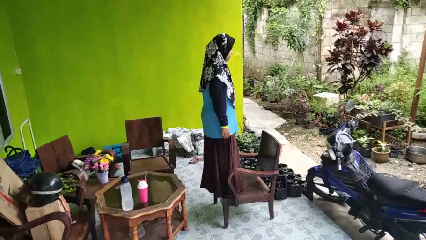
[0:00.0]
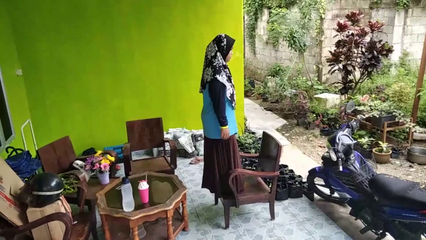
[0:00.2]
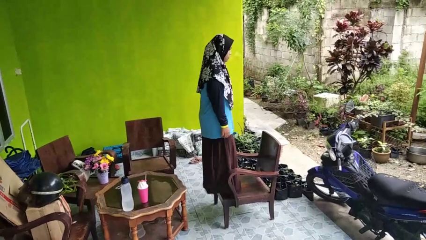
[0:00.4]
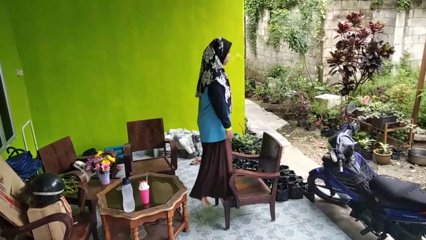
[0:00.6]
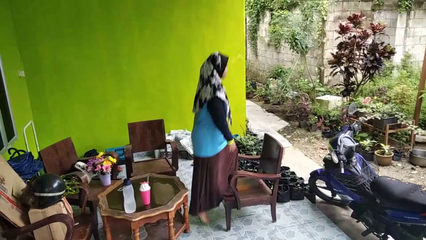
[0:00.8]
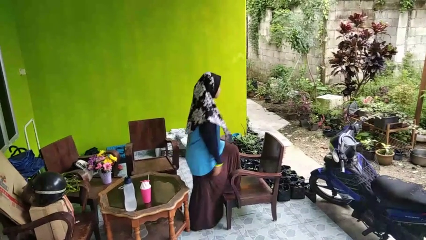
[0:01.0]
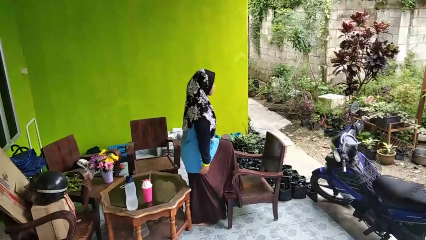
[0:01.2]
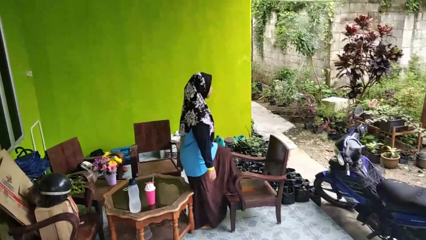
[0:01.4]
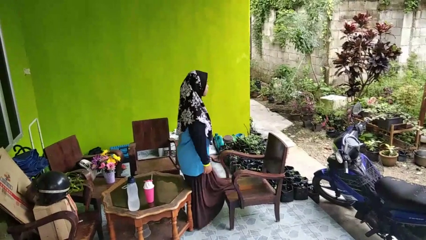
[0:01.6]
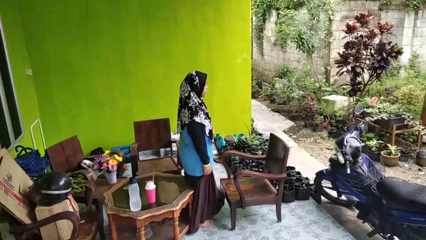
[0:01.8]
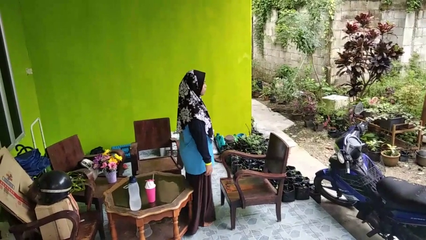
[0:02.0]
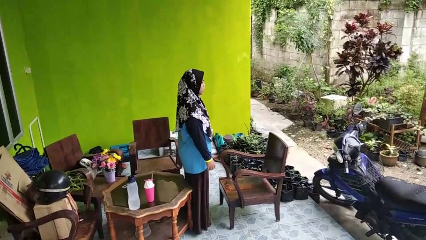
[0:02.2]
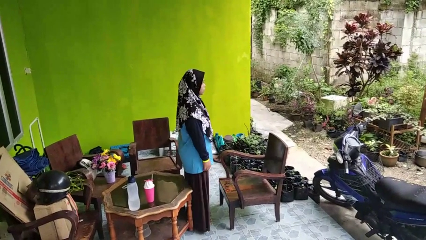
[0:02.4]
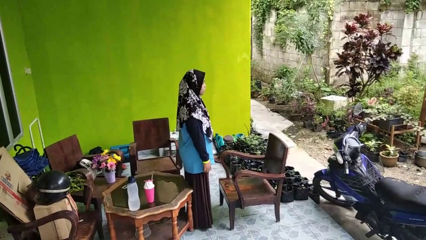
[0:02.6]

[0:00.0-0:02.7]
person climbs off chair

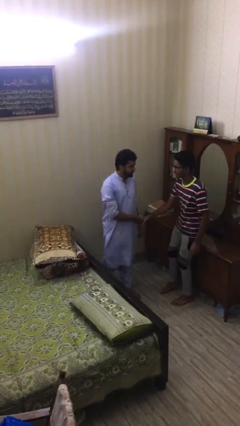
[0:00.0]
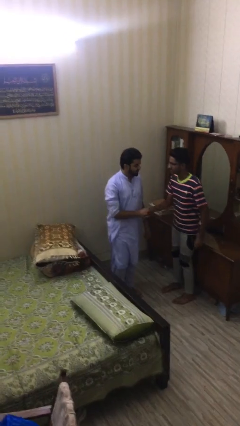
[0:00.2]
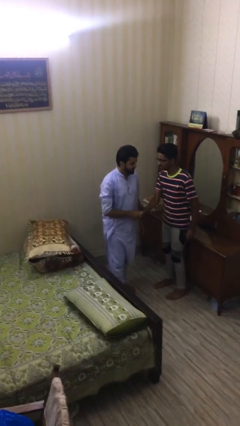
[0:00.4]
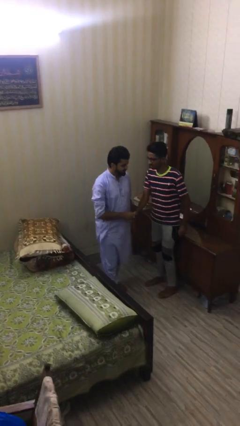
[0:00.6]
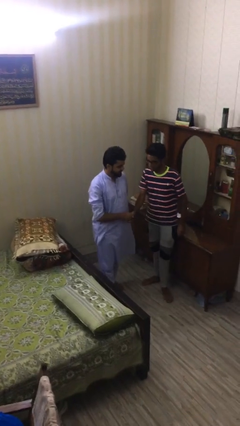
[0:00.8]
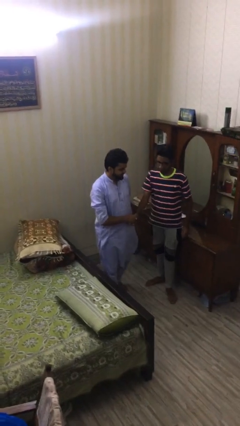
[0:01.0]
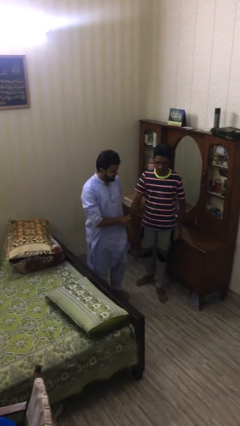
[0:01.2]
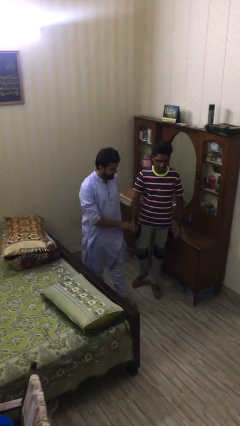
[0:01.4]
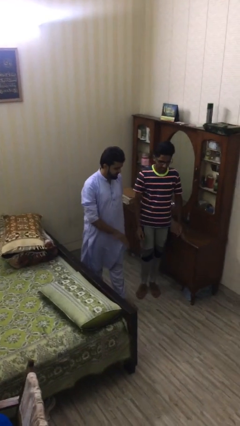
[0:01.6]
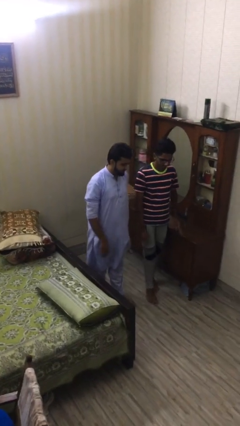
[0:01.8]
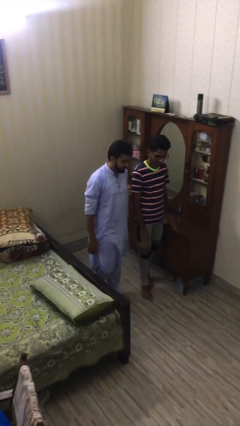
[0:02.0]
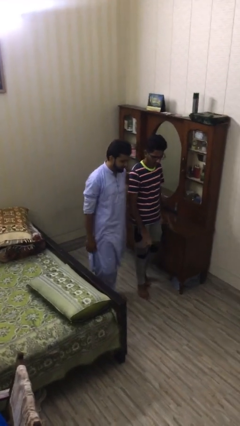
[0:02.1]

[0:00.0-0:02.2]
person shakes hand

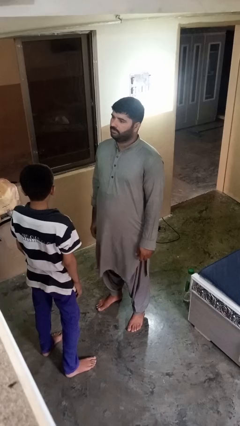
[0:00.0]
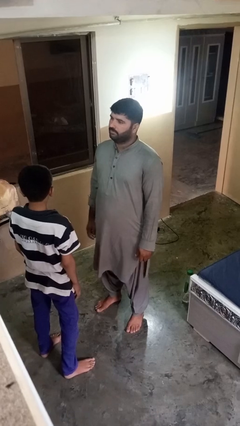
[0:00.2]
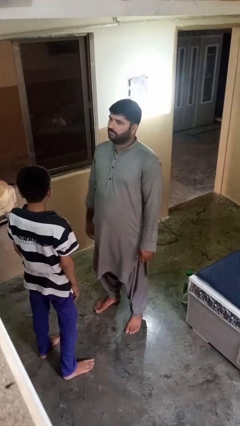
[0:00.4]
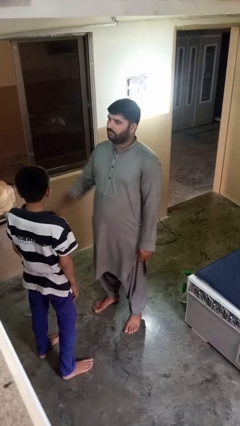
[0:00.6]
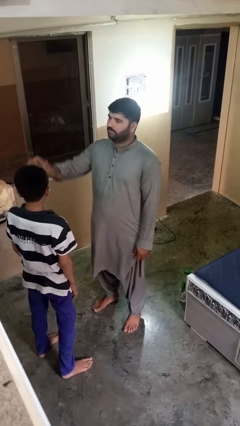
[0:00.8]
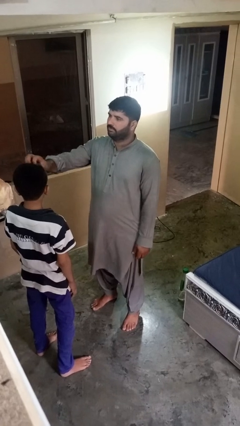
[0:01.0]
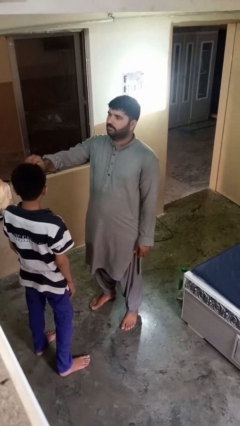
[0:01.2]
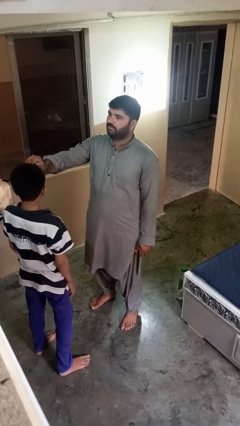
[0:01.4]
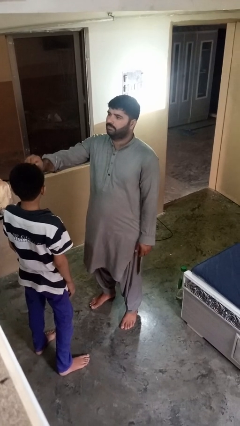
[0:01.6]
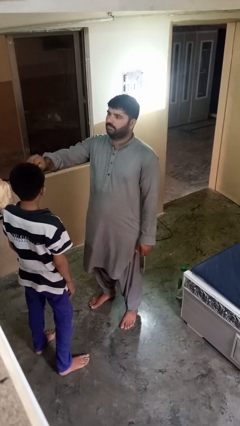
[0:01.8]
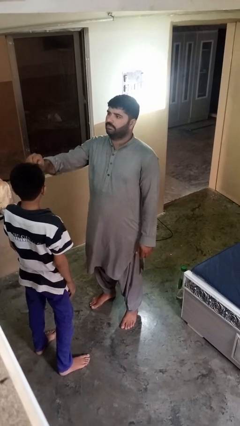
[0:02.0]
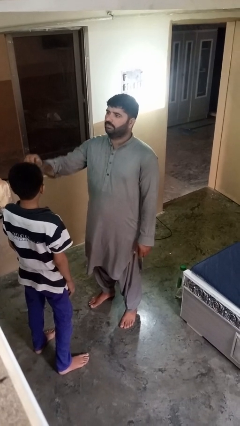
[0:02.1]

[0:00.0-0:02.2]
person braids hair of person

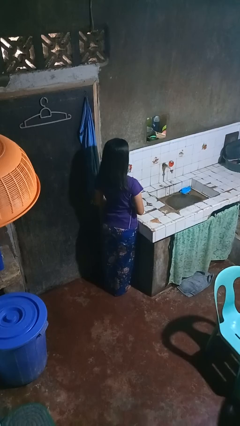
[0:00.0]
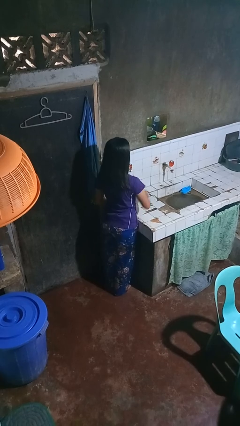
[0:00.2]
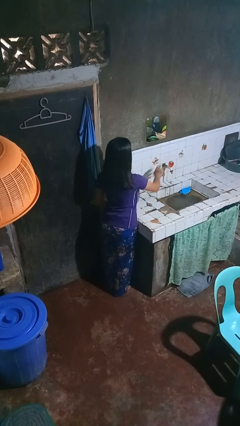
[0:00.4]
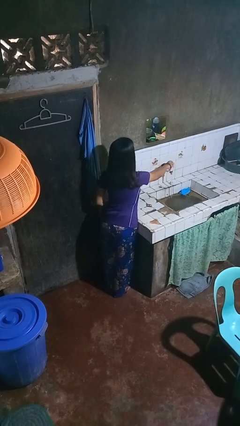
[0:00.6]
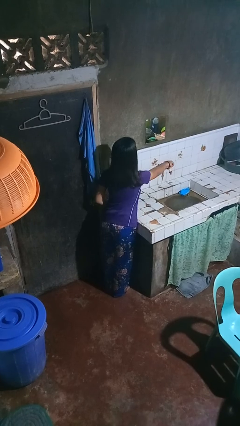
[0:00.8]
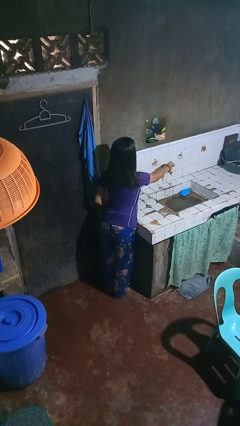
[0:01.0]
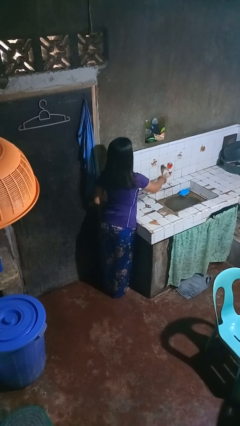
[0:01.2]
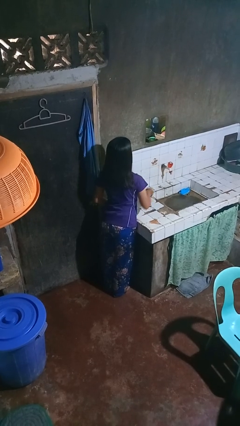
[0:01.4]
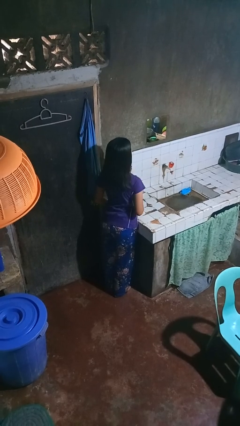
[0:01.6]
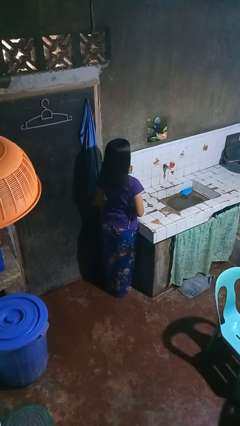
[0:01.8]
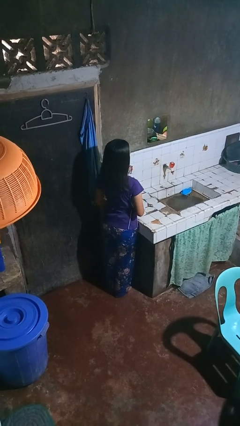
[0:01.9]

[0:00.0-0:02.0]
person turns off faucet

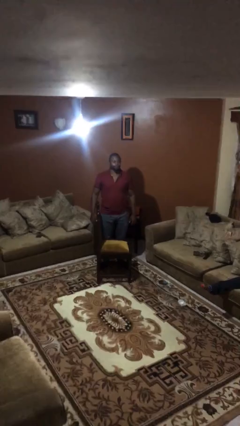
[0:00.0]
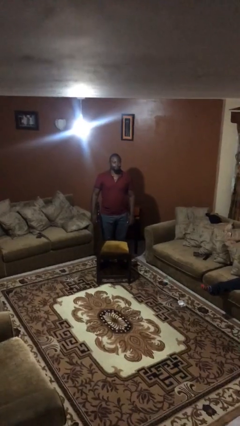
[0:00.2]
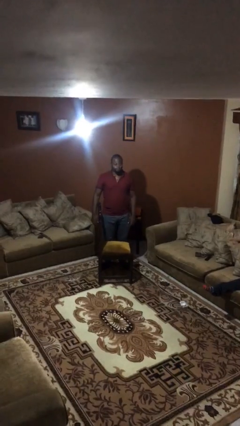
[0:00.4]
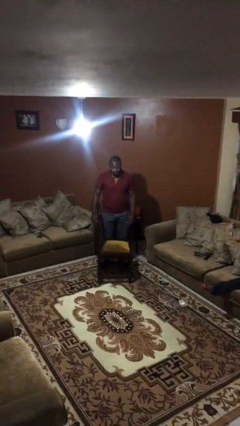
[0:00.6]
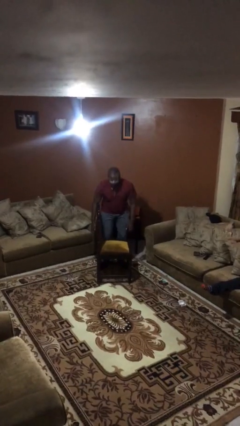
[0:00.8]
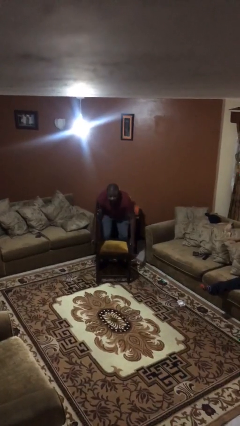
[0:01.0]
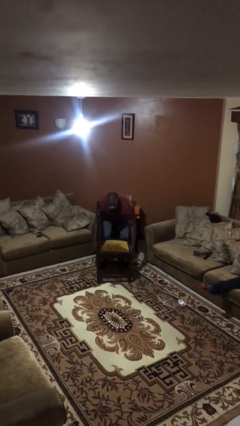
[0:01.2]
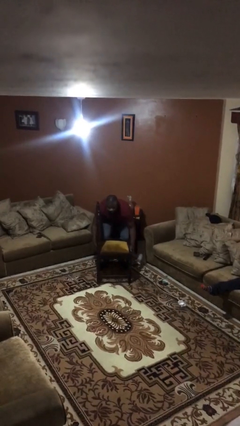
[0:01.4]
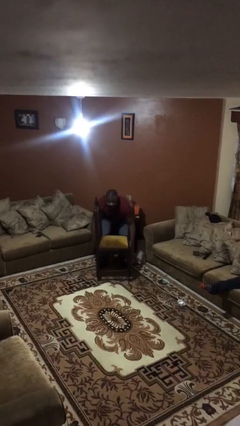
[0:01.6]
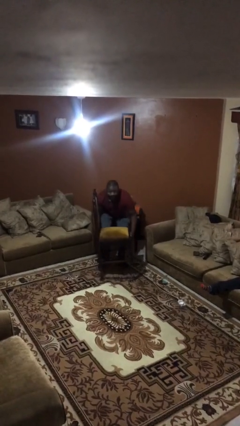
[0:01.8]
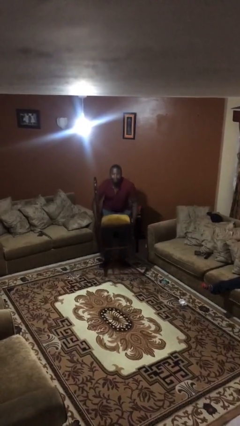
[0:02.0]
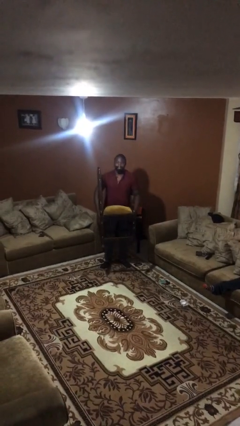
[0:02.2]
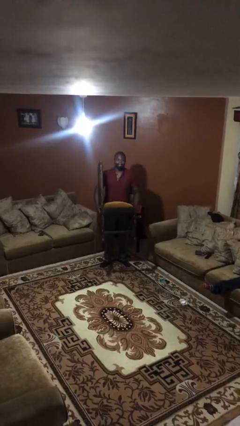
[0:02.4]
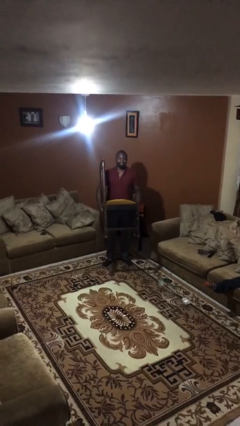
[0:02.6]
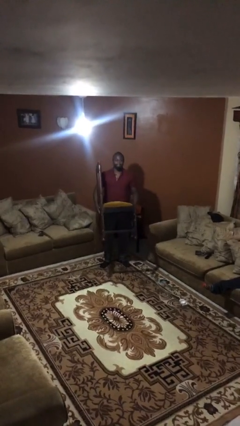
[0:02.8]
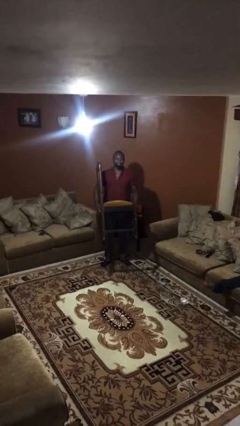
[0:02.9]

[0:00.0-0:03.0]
person picks up object from floor

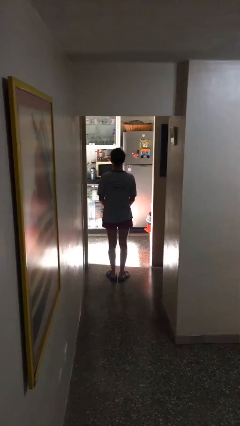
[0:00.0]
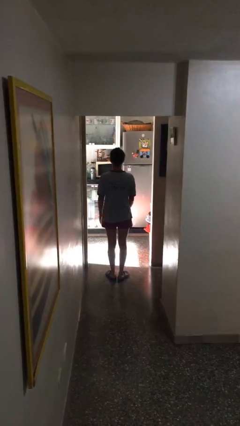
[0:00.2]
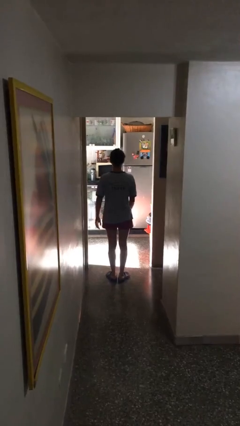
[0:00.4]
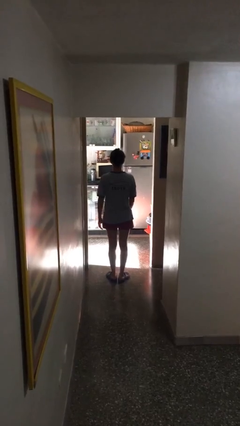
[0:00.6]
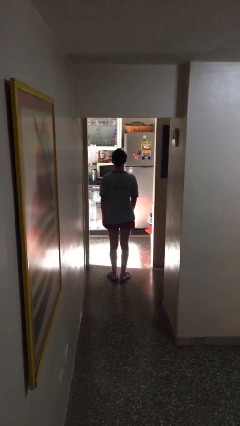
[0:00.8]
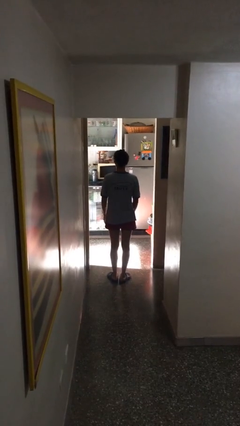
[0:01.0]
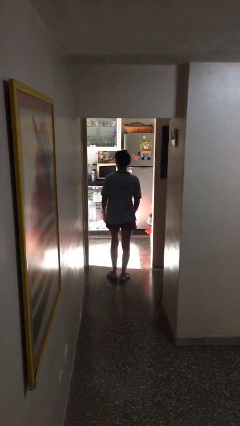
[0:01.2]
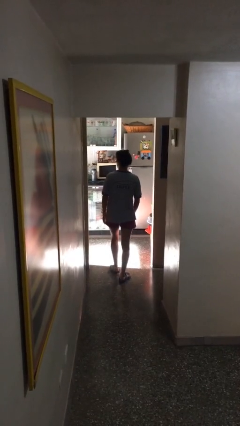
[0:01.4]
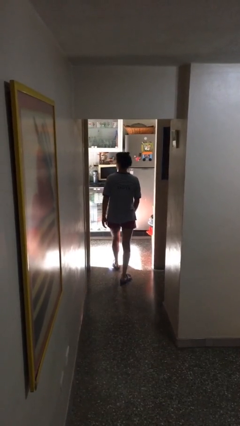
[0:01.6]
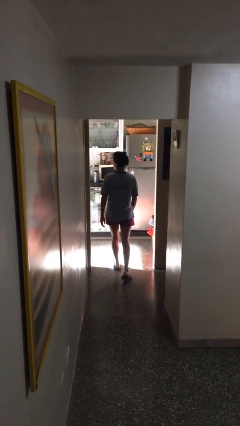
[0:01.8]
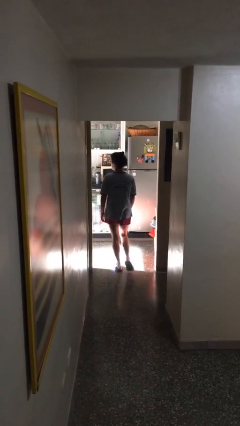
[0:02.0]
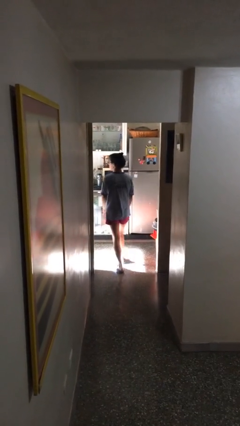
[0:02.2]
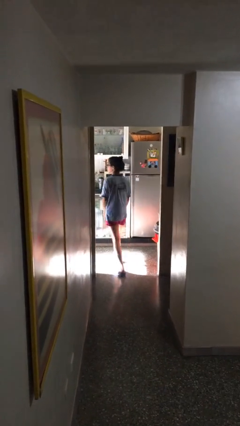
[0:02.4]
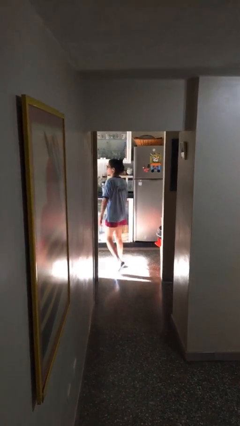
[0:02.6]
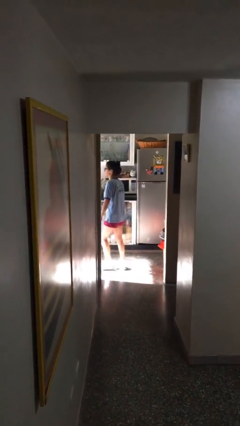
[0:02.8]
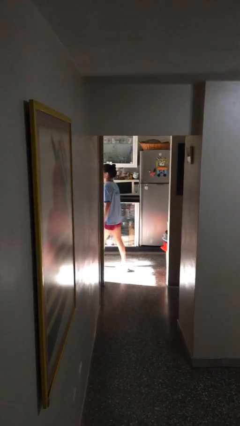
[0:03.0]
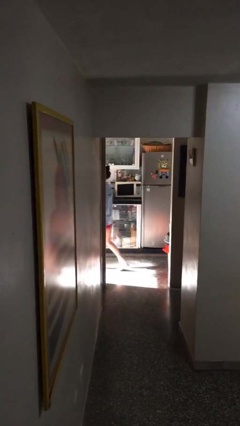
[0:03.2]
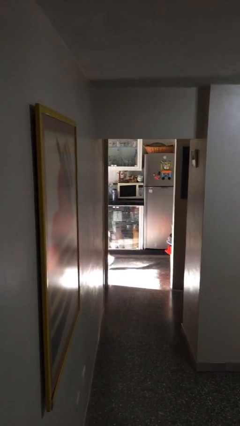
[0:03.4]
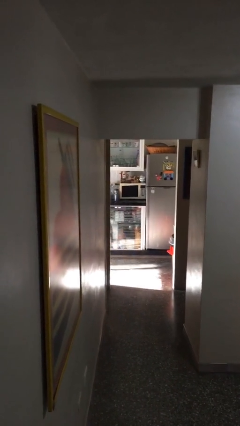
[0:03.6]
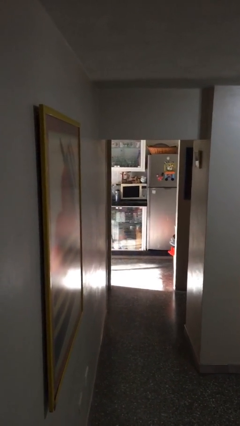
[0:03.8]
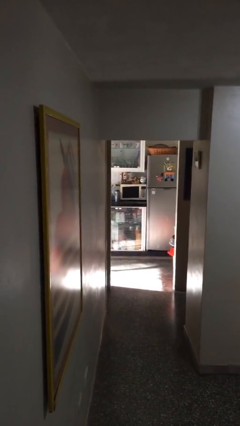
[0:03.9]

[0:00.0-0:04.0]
person exits scene through structure

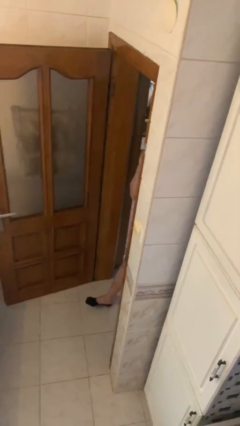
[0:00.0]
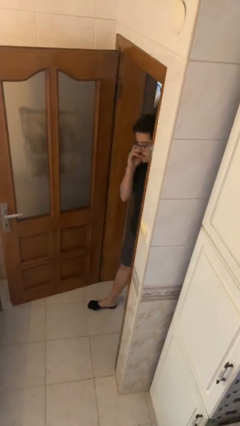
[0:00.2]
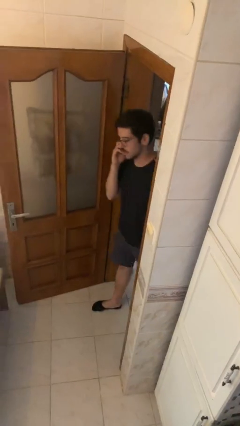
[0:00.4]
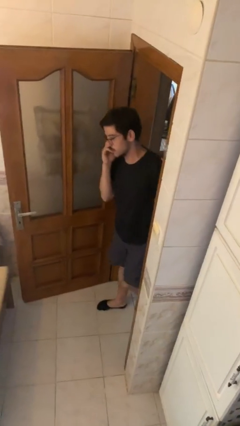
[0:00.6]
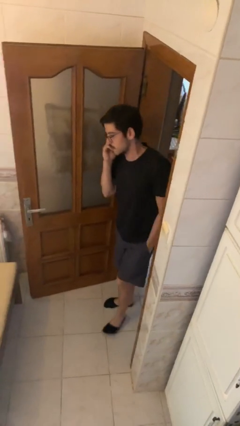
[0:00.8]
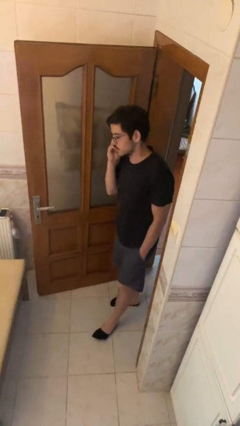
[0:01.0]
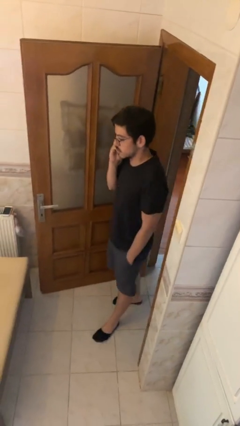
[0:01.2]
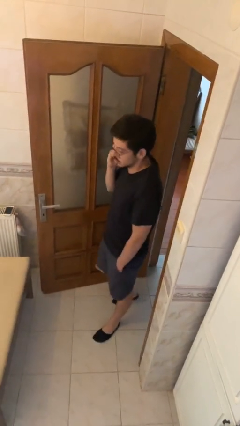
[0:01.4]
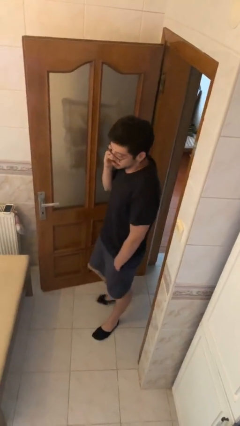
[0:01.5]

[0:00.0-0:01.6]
person enters scene through structure
